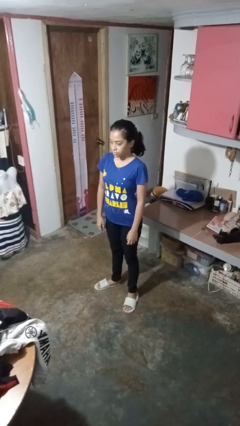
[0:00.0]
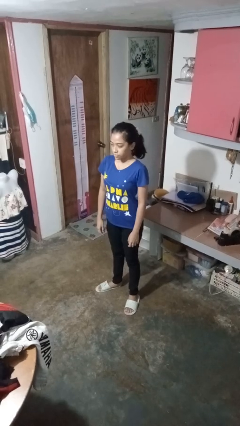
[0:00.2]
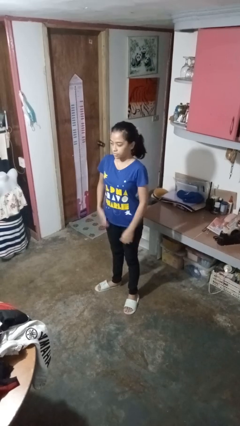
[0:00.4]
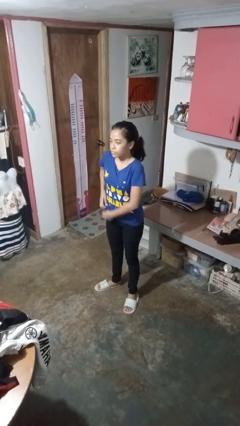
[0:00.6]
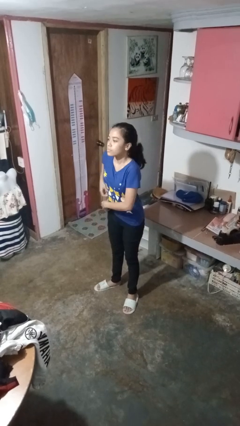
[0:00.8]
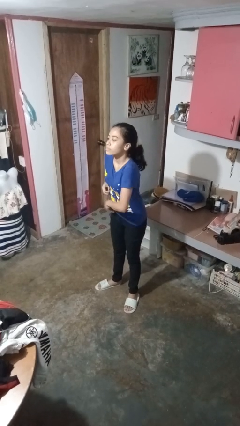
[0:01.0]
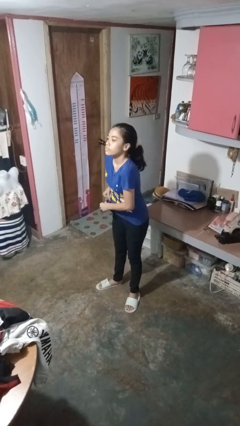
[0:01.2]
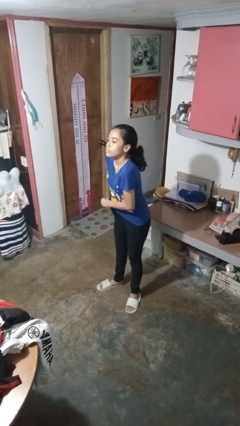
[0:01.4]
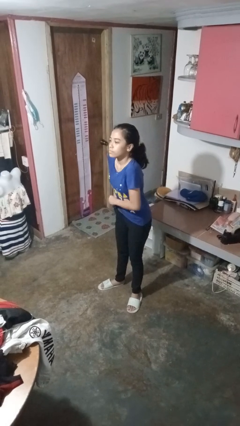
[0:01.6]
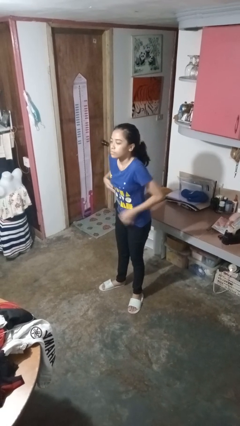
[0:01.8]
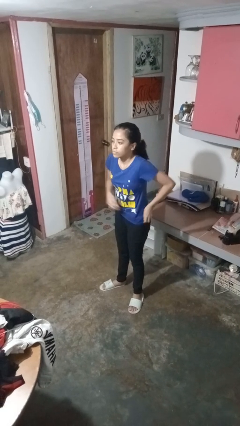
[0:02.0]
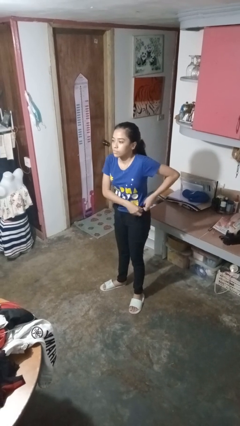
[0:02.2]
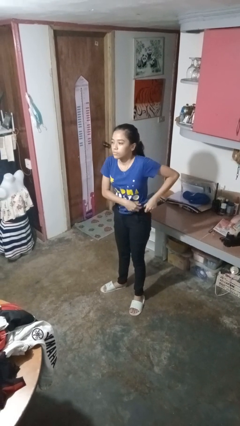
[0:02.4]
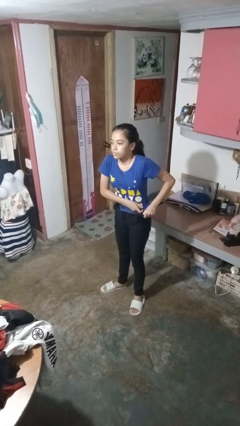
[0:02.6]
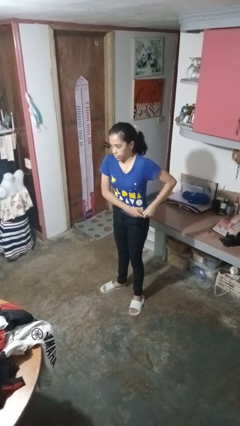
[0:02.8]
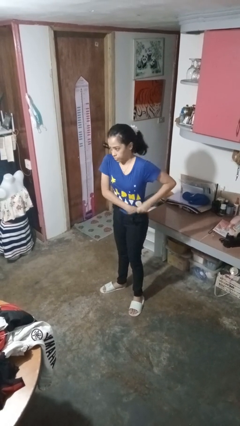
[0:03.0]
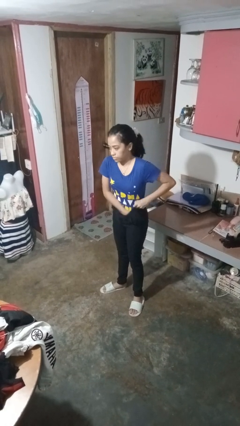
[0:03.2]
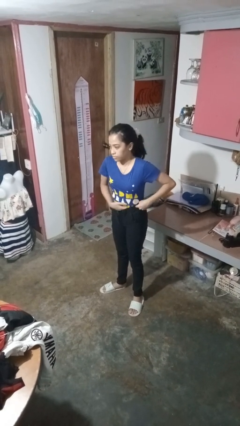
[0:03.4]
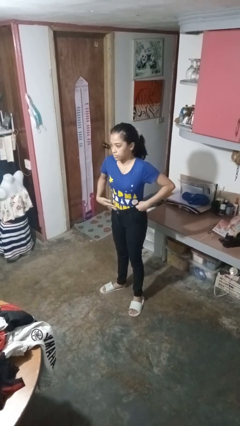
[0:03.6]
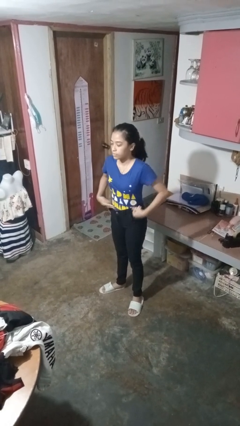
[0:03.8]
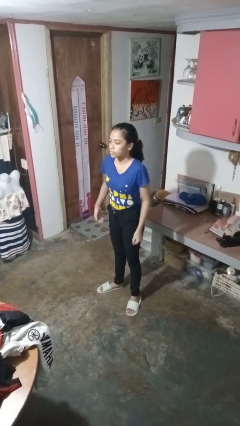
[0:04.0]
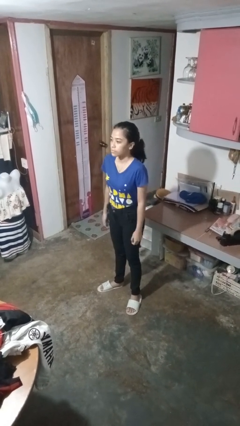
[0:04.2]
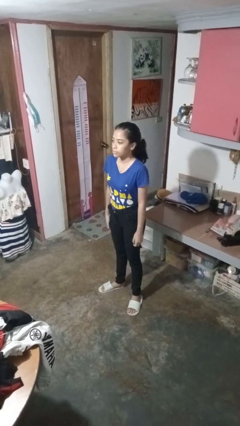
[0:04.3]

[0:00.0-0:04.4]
person tucks in shirt

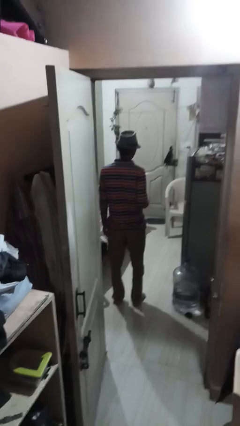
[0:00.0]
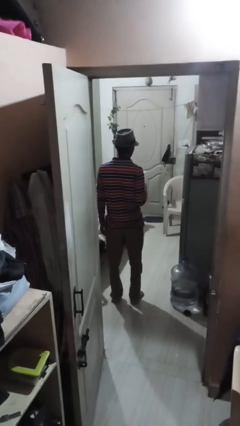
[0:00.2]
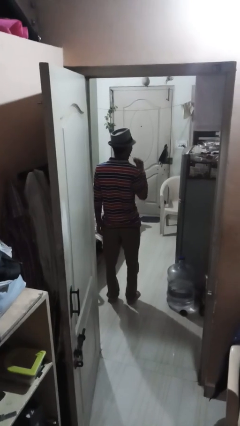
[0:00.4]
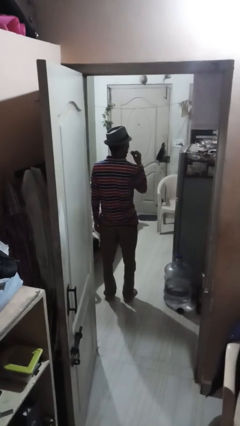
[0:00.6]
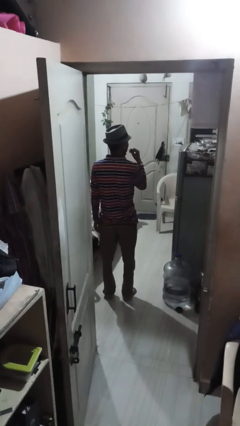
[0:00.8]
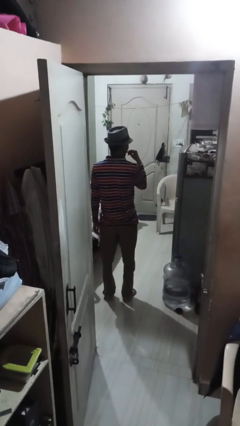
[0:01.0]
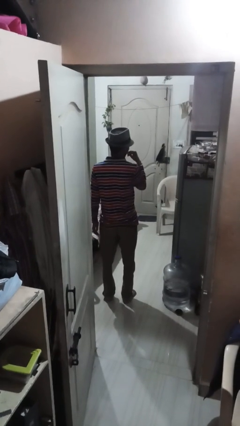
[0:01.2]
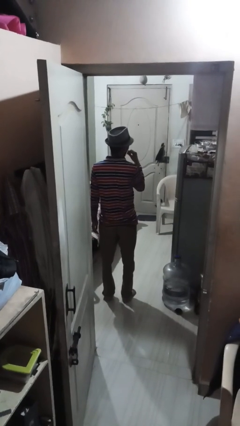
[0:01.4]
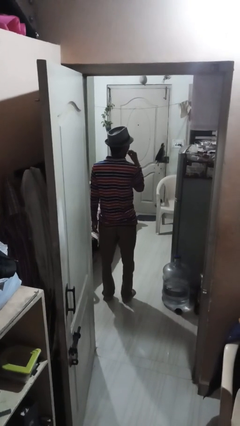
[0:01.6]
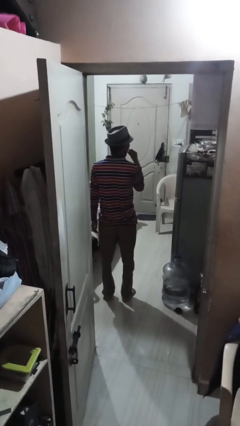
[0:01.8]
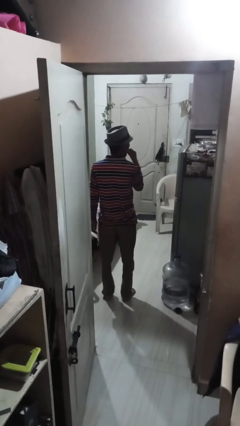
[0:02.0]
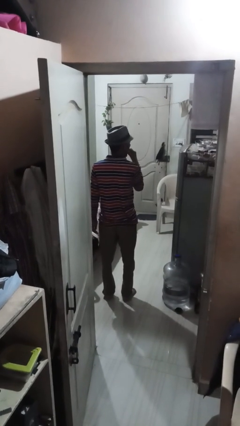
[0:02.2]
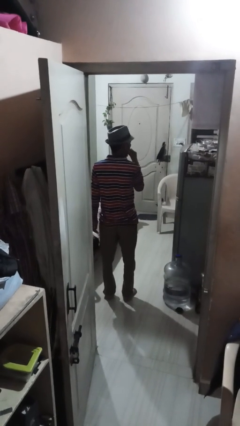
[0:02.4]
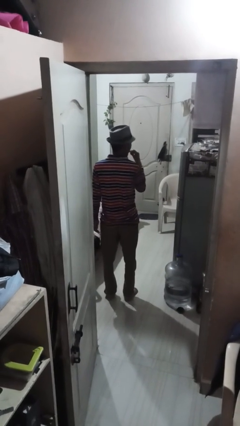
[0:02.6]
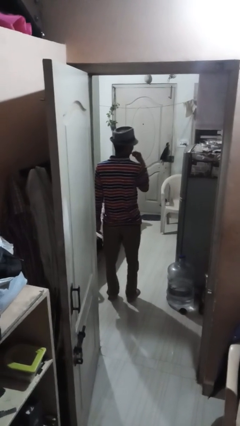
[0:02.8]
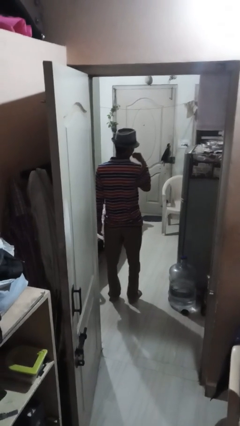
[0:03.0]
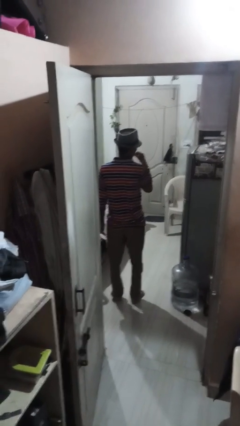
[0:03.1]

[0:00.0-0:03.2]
person brushes teeth

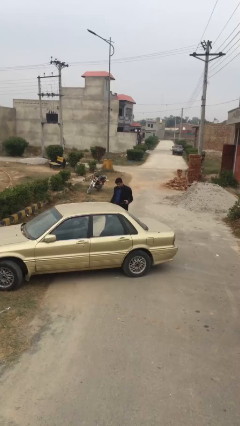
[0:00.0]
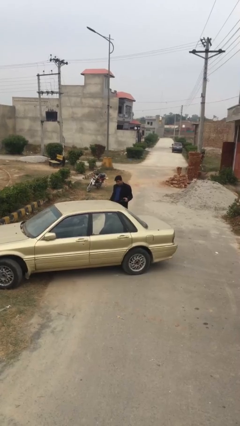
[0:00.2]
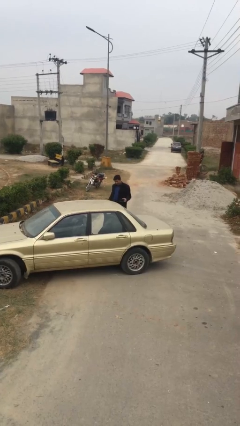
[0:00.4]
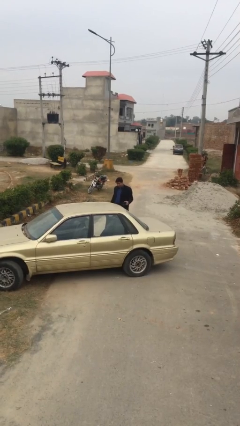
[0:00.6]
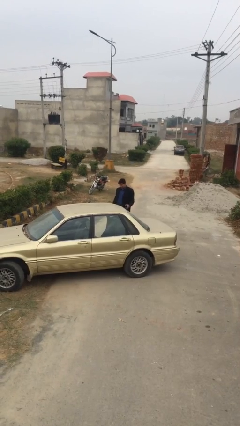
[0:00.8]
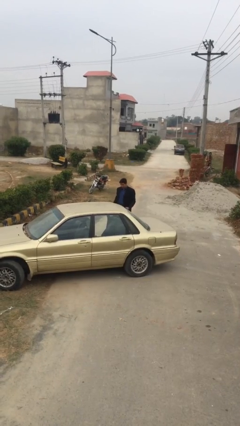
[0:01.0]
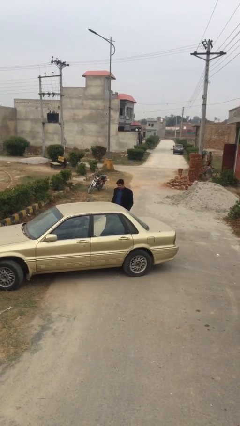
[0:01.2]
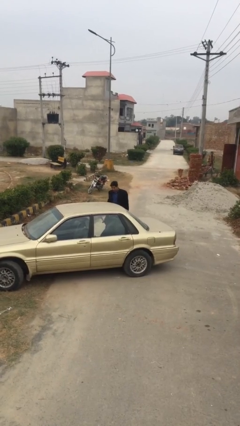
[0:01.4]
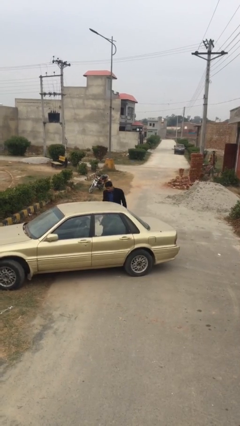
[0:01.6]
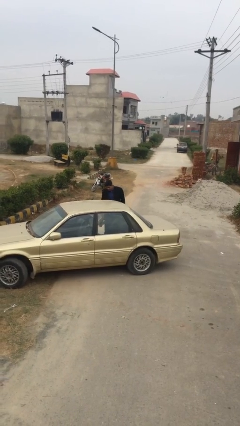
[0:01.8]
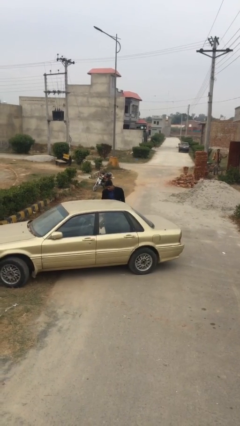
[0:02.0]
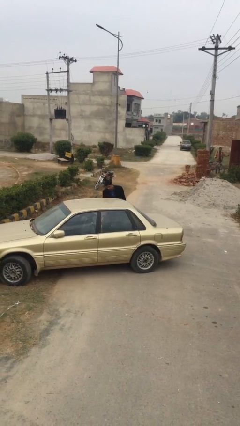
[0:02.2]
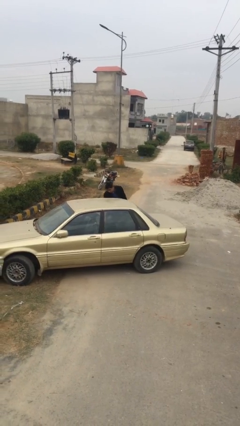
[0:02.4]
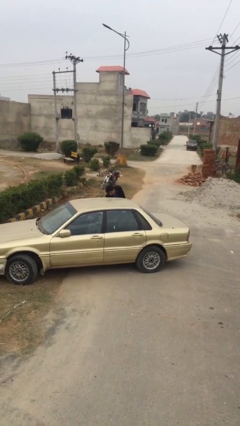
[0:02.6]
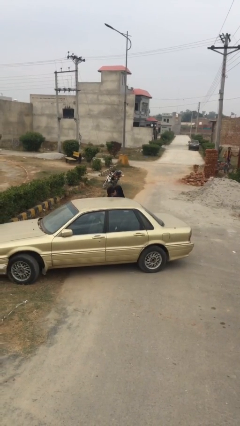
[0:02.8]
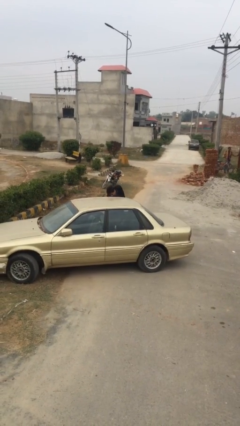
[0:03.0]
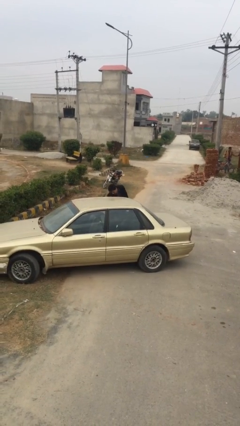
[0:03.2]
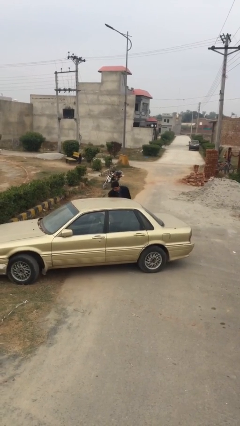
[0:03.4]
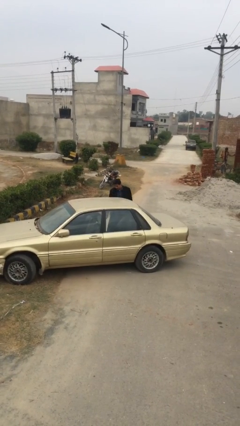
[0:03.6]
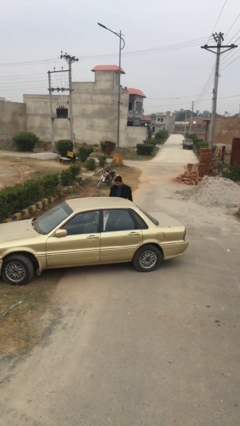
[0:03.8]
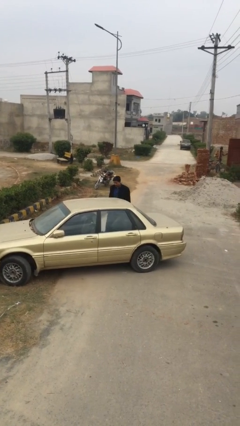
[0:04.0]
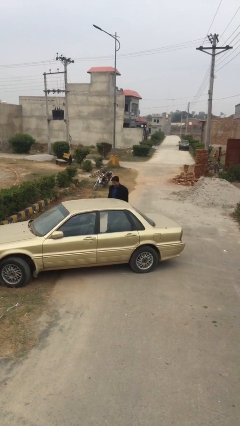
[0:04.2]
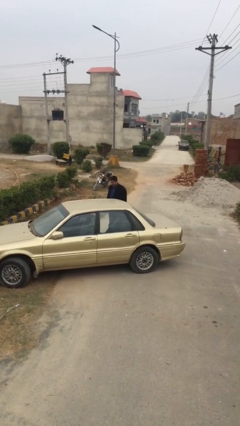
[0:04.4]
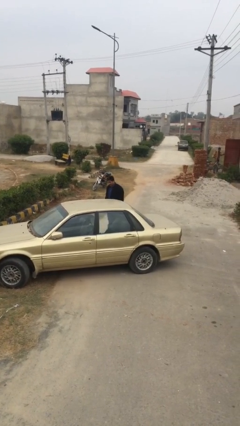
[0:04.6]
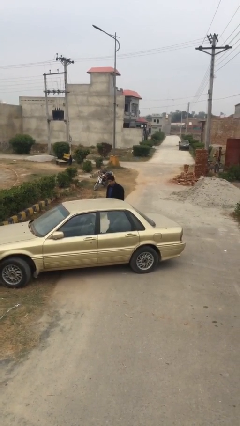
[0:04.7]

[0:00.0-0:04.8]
person loads car

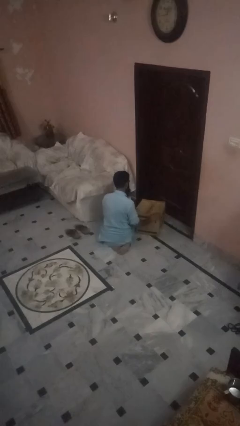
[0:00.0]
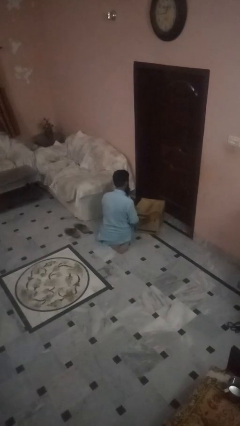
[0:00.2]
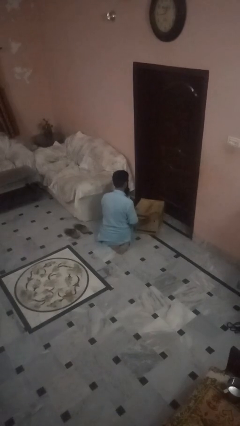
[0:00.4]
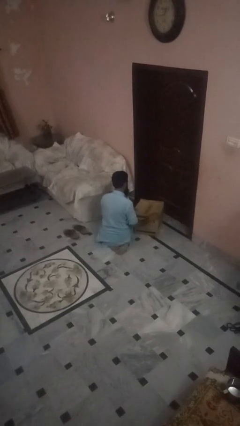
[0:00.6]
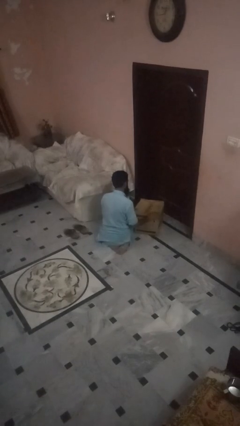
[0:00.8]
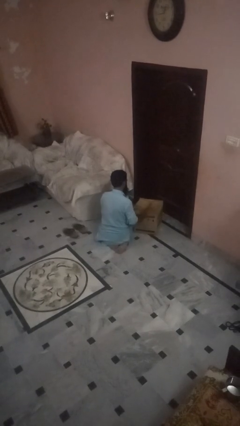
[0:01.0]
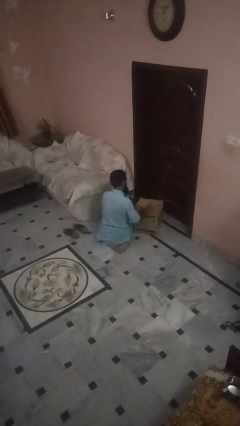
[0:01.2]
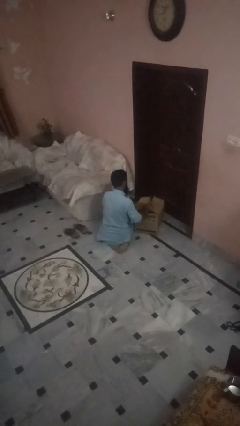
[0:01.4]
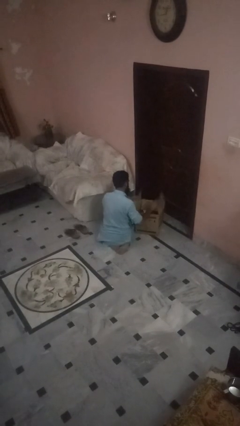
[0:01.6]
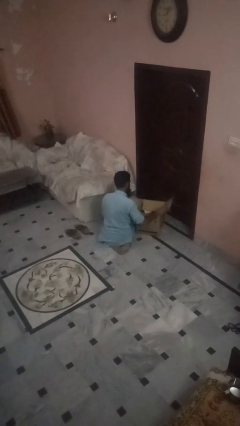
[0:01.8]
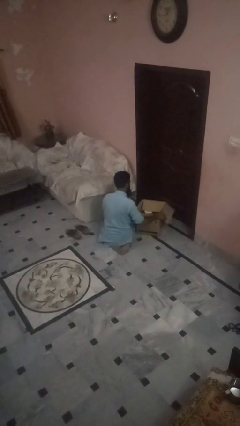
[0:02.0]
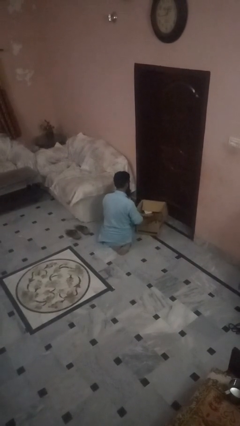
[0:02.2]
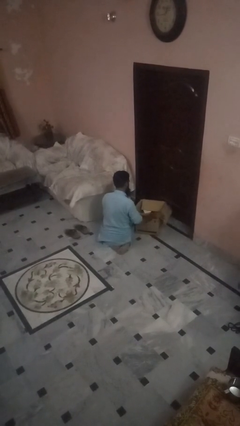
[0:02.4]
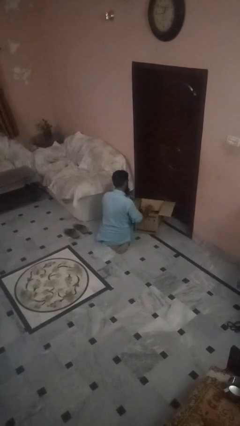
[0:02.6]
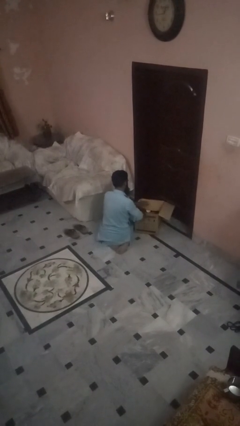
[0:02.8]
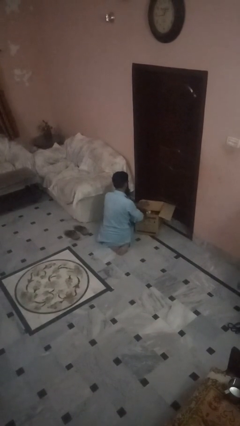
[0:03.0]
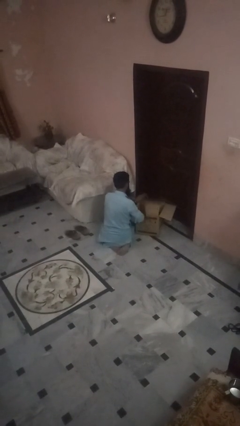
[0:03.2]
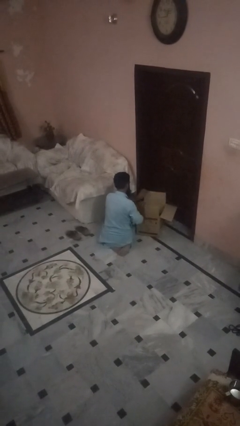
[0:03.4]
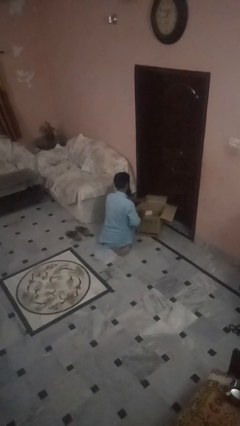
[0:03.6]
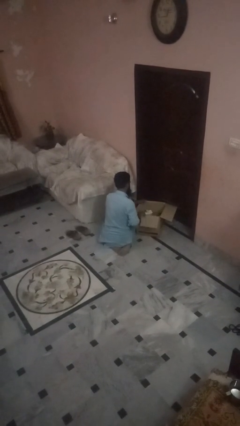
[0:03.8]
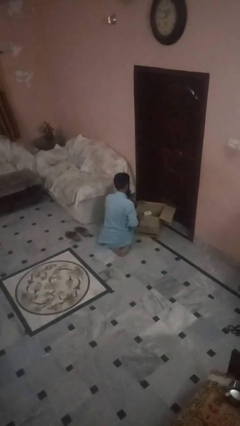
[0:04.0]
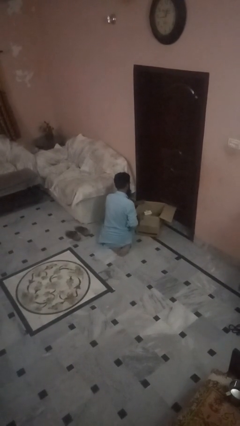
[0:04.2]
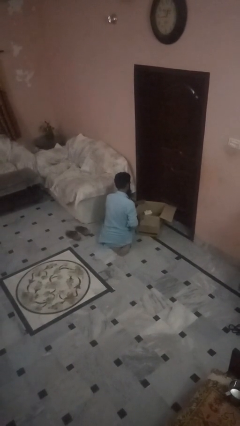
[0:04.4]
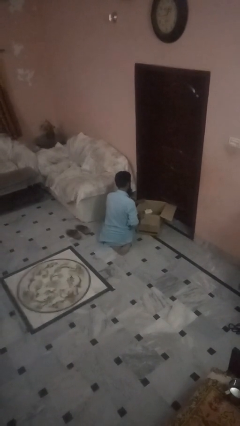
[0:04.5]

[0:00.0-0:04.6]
person opens box

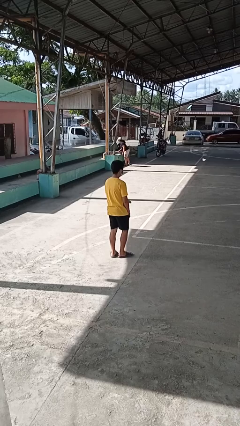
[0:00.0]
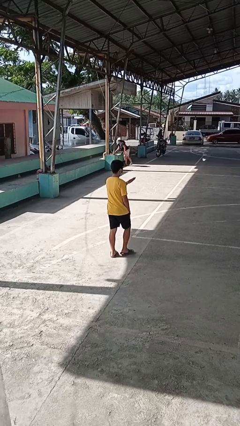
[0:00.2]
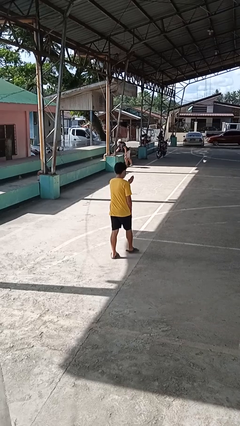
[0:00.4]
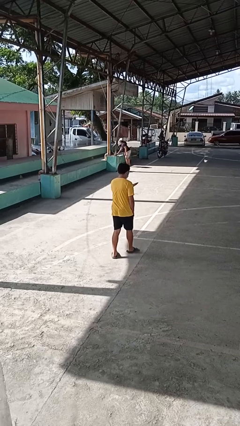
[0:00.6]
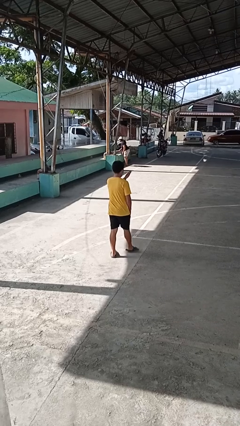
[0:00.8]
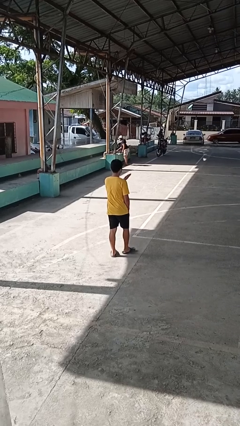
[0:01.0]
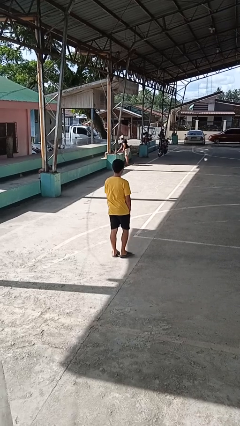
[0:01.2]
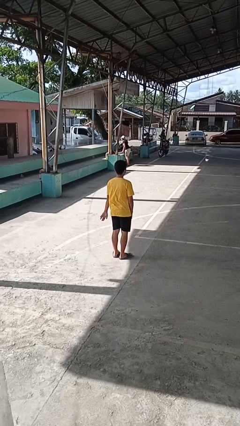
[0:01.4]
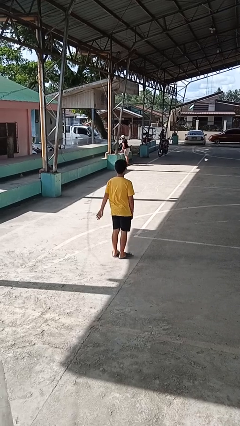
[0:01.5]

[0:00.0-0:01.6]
person karate chop
